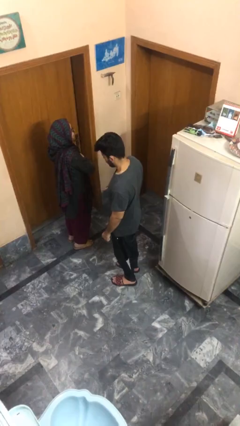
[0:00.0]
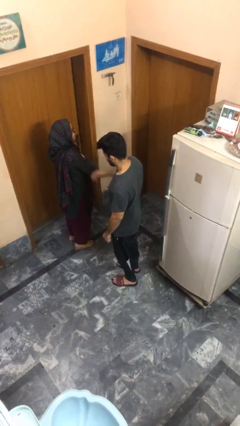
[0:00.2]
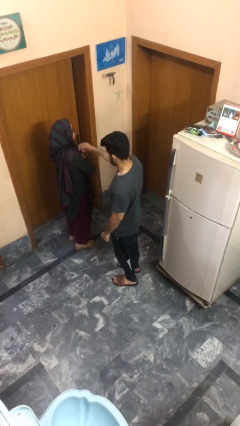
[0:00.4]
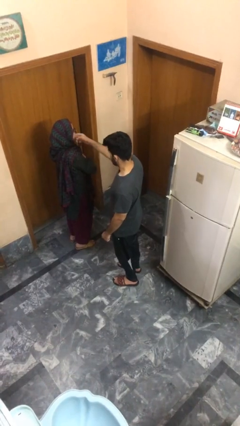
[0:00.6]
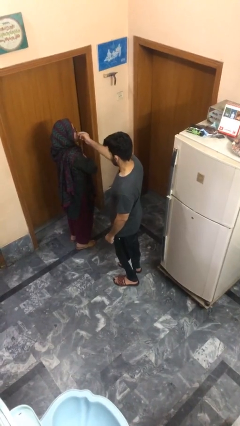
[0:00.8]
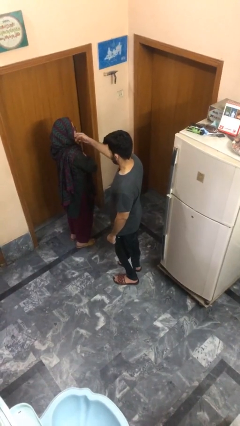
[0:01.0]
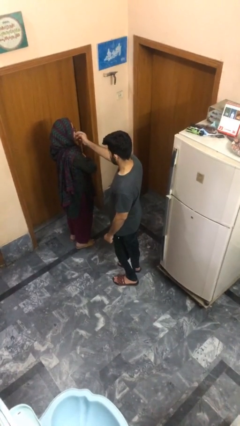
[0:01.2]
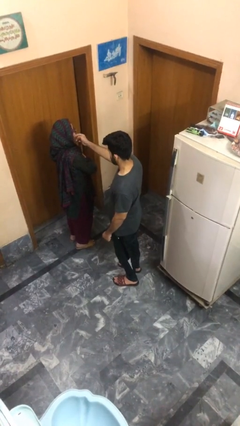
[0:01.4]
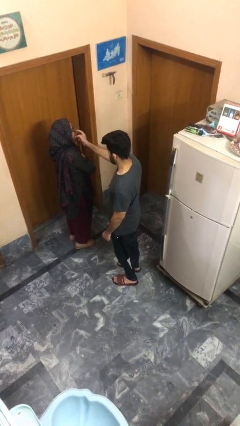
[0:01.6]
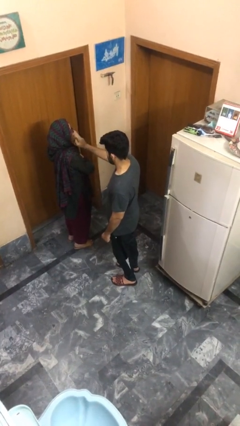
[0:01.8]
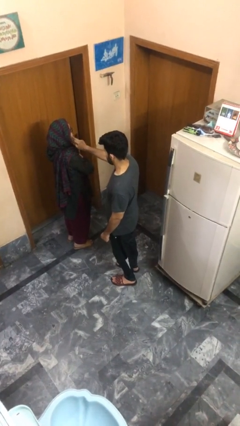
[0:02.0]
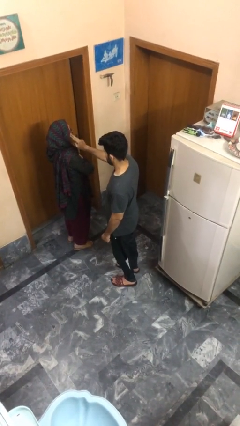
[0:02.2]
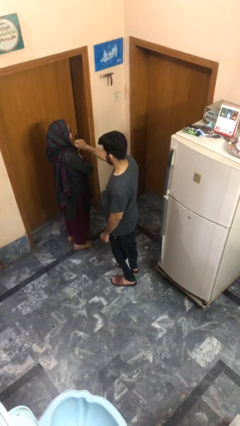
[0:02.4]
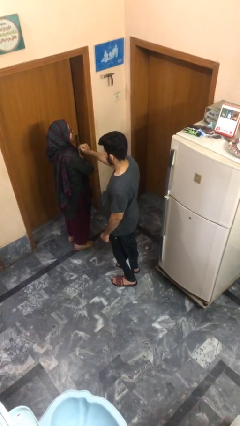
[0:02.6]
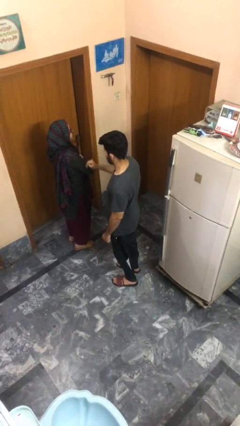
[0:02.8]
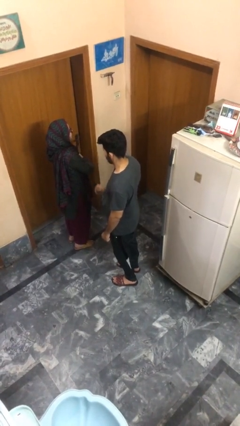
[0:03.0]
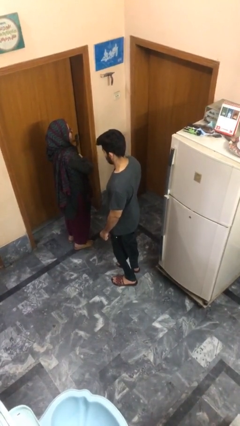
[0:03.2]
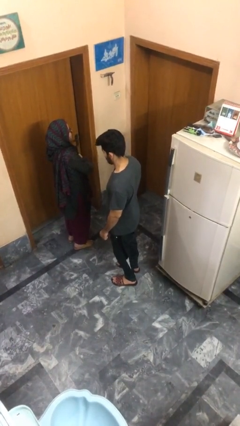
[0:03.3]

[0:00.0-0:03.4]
person touches face of person

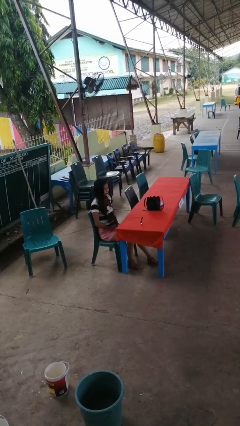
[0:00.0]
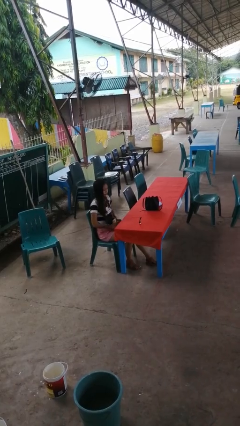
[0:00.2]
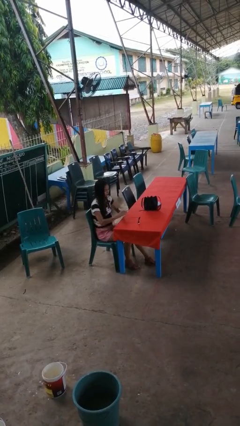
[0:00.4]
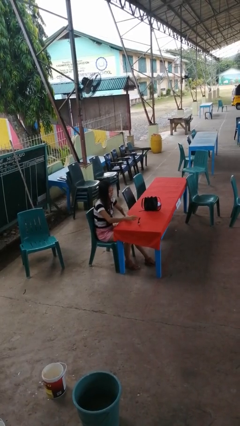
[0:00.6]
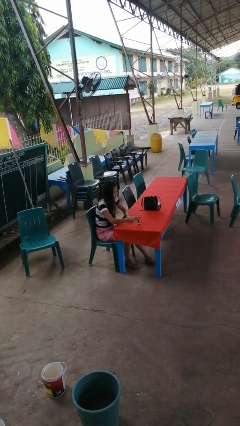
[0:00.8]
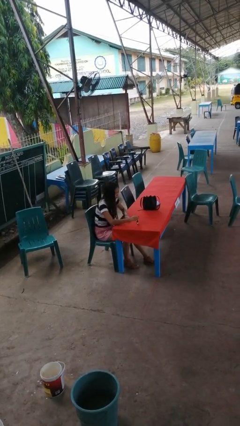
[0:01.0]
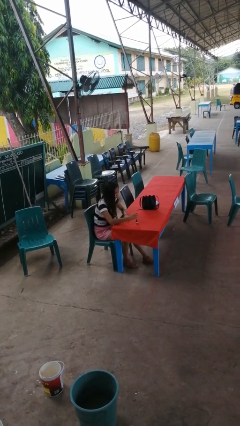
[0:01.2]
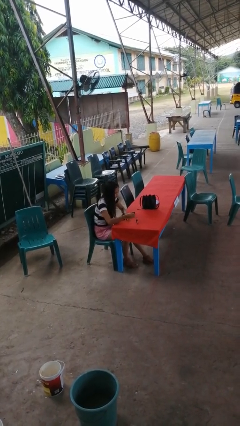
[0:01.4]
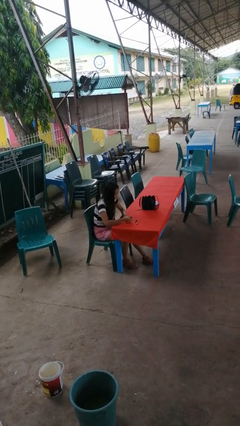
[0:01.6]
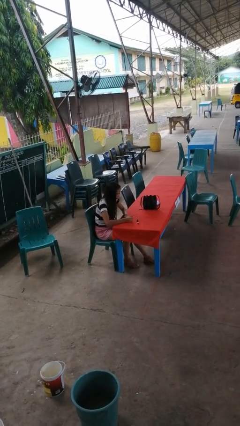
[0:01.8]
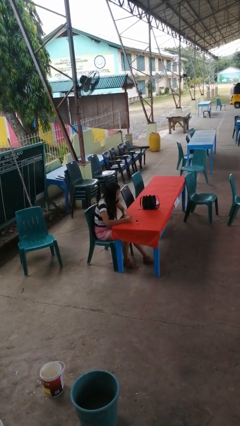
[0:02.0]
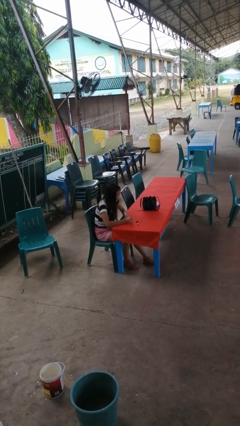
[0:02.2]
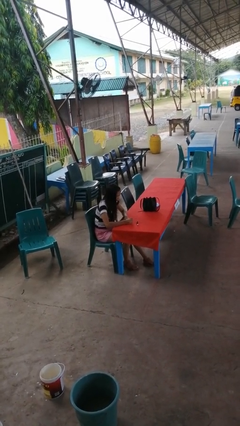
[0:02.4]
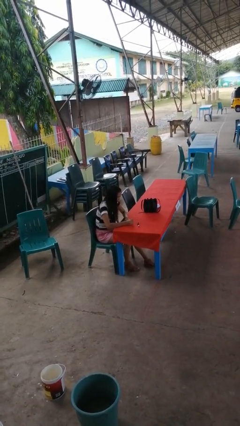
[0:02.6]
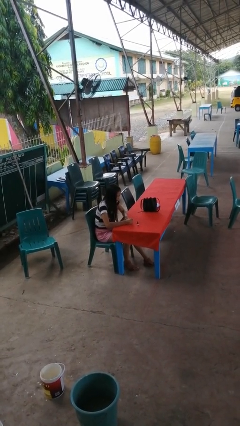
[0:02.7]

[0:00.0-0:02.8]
person paints fingernails

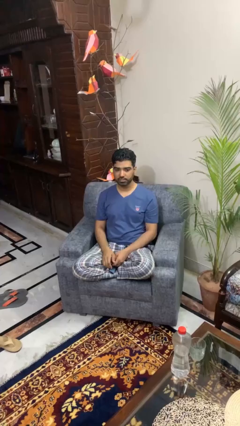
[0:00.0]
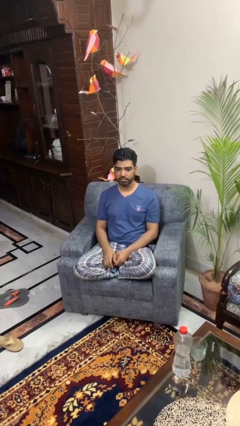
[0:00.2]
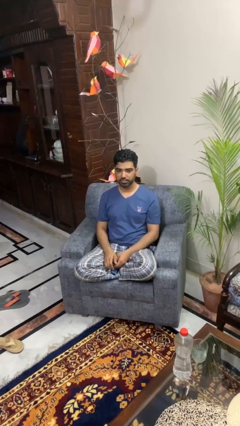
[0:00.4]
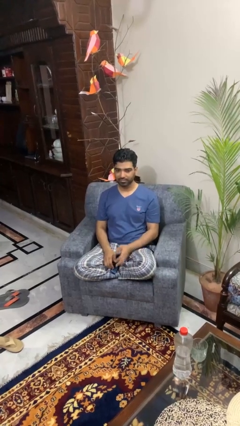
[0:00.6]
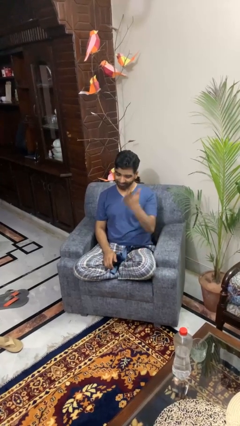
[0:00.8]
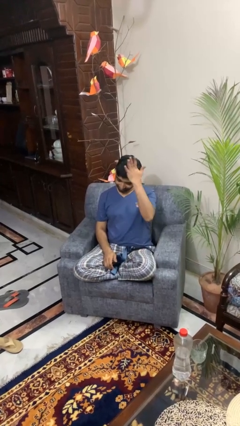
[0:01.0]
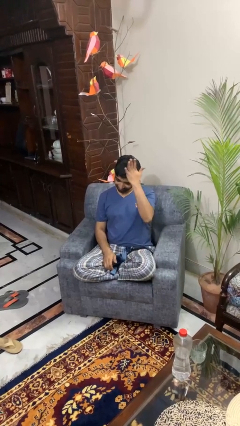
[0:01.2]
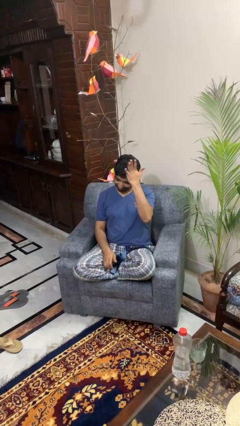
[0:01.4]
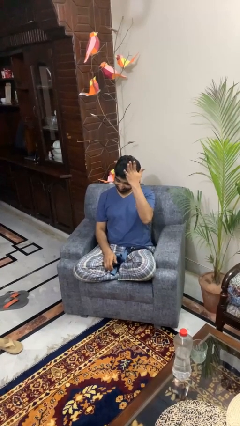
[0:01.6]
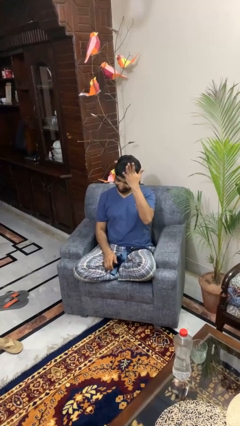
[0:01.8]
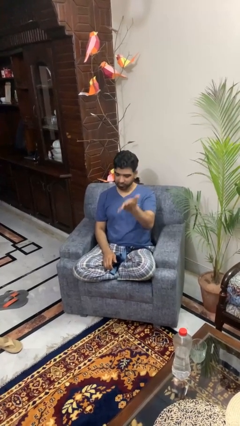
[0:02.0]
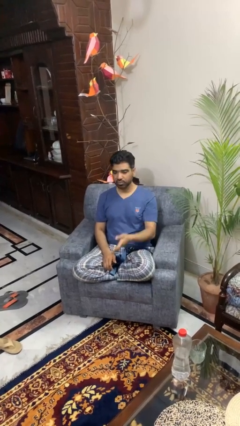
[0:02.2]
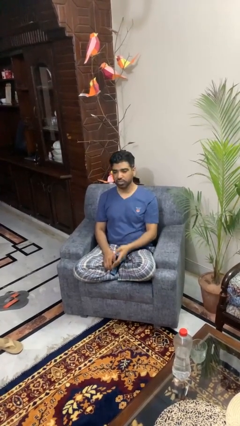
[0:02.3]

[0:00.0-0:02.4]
person pats head

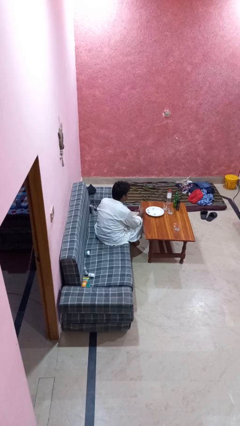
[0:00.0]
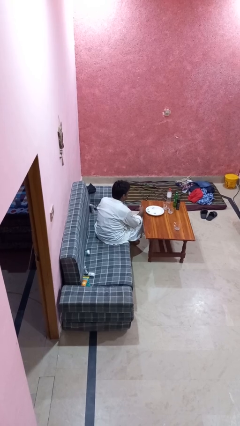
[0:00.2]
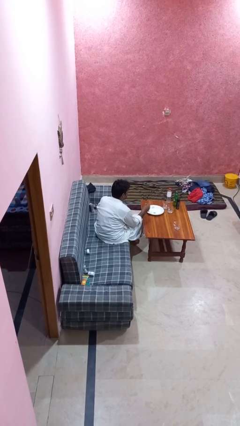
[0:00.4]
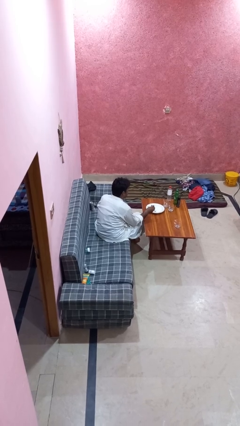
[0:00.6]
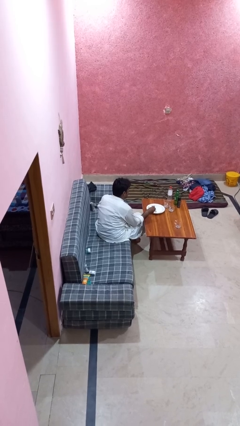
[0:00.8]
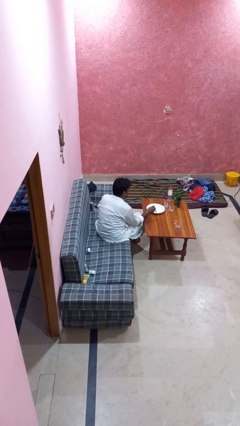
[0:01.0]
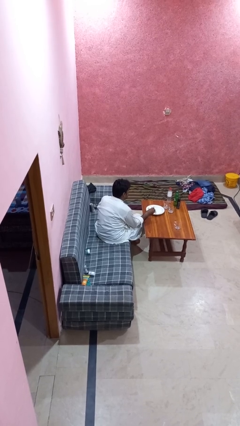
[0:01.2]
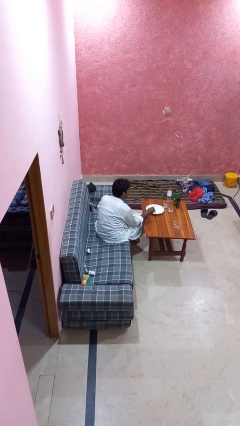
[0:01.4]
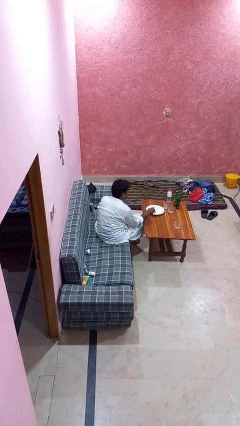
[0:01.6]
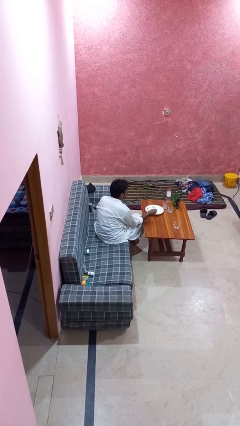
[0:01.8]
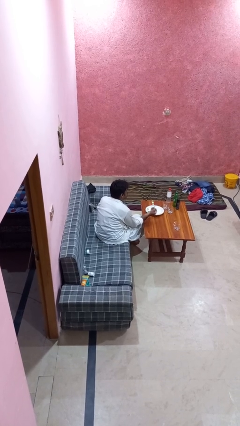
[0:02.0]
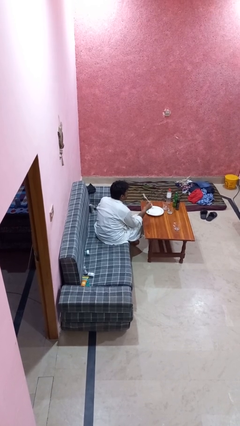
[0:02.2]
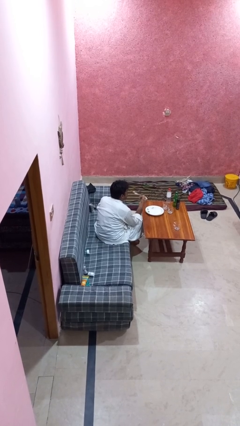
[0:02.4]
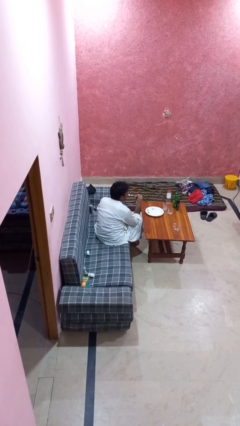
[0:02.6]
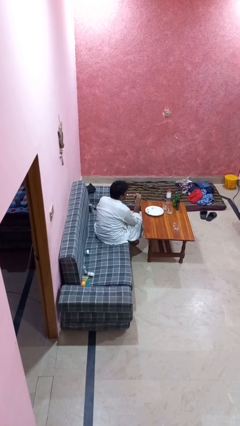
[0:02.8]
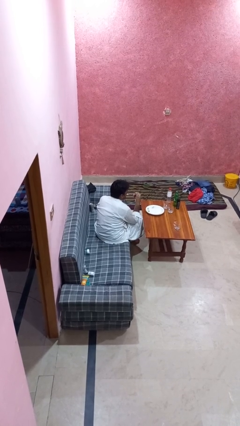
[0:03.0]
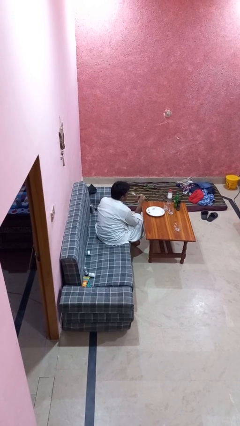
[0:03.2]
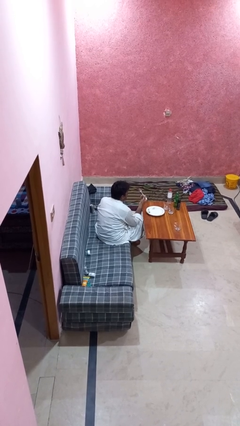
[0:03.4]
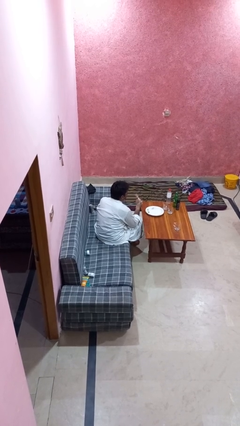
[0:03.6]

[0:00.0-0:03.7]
person eats with utensil

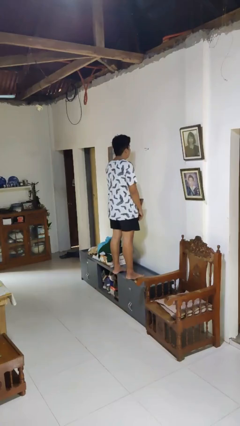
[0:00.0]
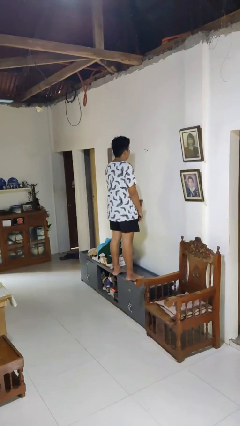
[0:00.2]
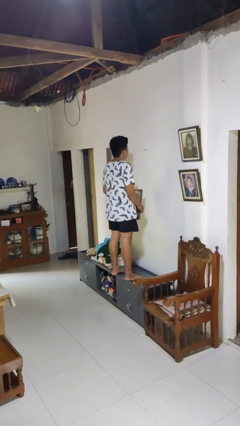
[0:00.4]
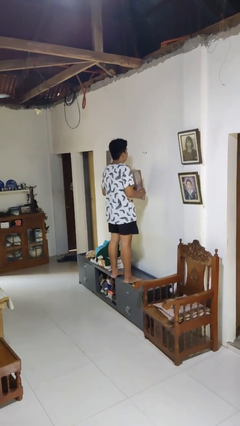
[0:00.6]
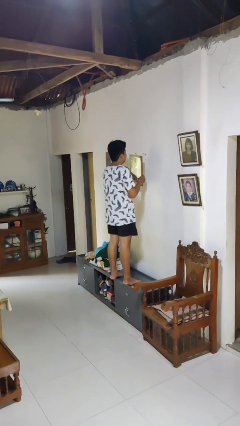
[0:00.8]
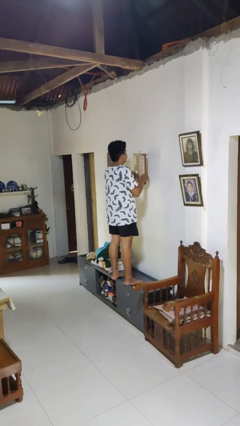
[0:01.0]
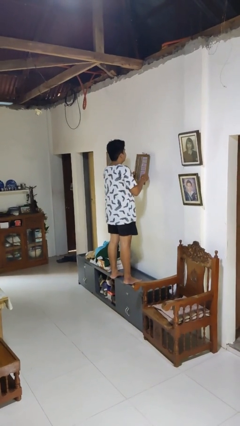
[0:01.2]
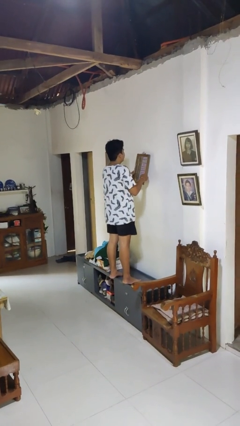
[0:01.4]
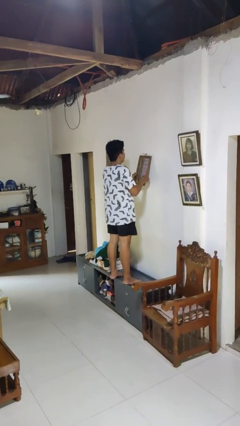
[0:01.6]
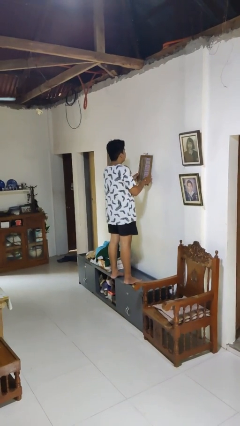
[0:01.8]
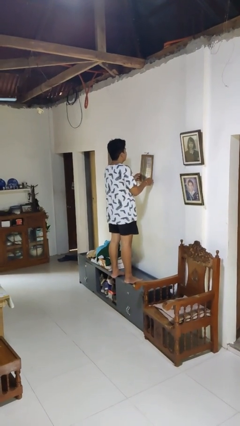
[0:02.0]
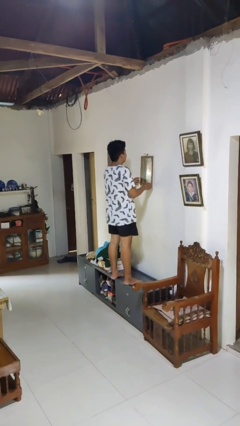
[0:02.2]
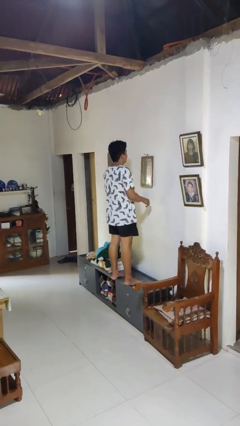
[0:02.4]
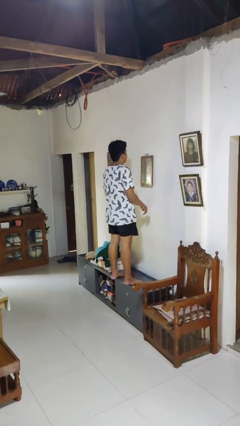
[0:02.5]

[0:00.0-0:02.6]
person puts up picture frame

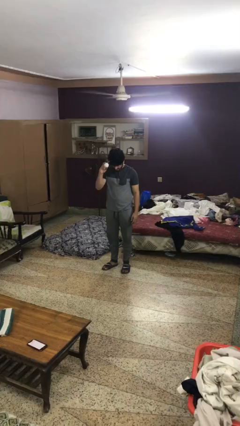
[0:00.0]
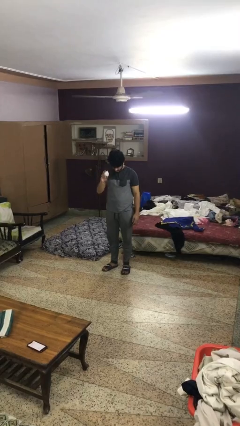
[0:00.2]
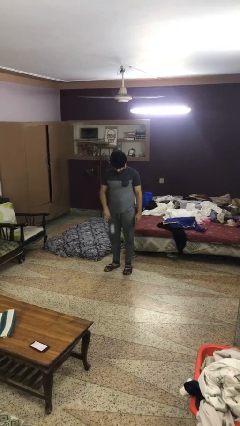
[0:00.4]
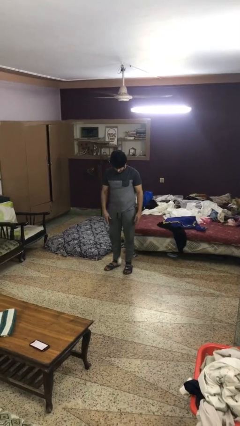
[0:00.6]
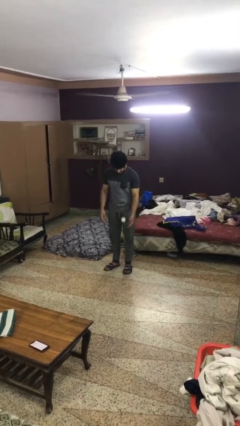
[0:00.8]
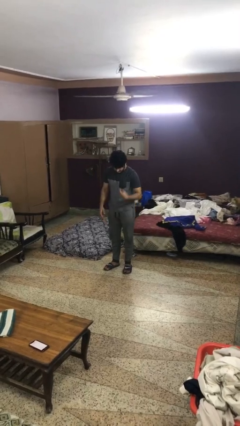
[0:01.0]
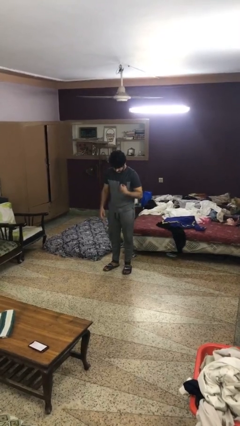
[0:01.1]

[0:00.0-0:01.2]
person bounces ball on floor

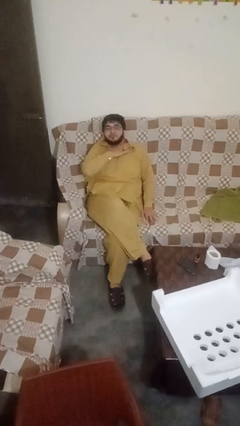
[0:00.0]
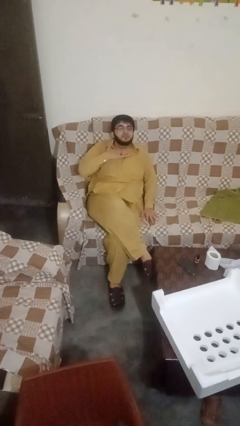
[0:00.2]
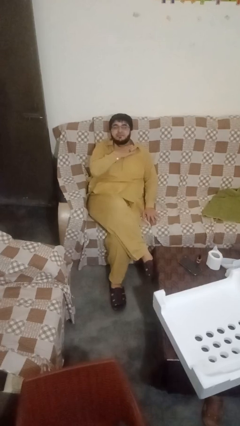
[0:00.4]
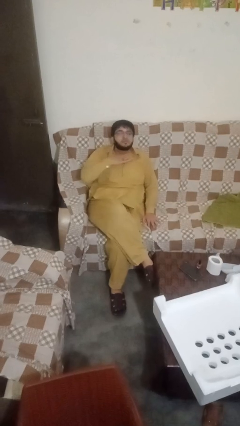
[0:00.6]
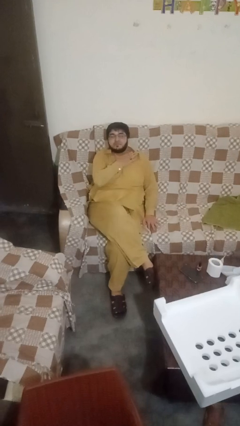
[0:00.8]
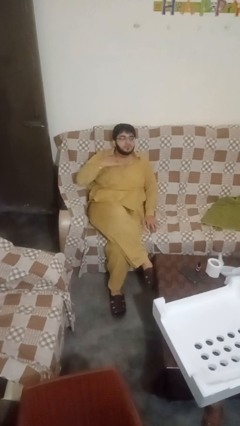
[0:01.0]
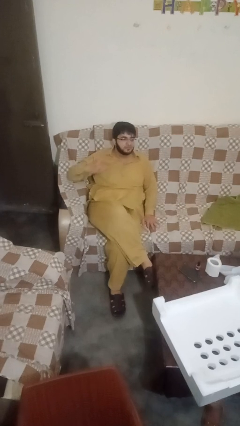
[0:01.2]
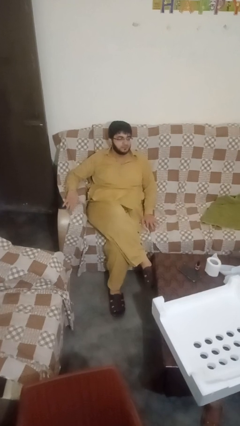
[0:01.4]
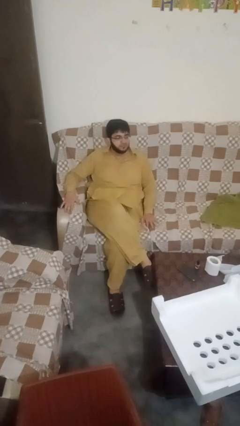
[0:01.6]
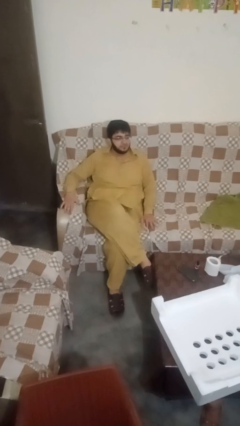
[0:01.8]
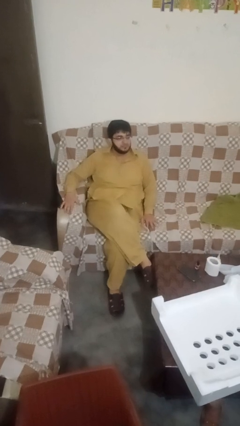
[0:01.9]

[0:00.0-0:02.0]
person gestures cut
